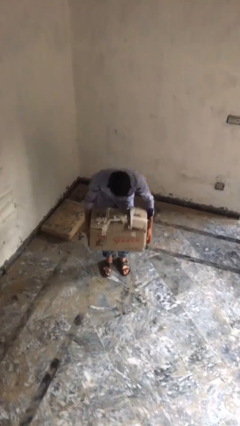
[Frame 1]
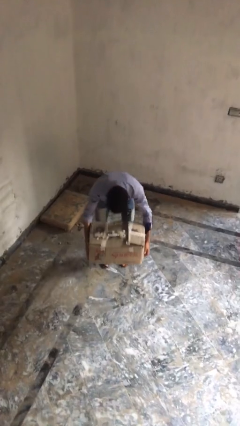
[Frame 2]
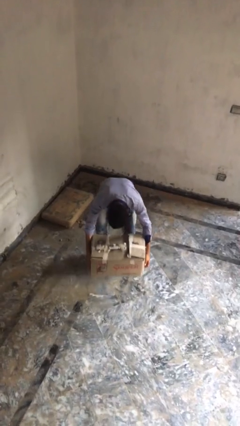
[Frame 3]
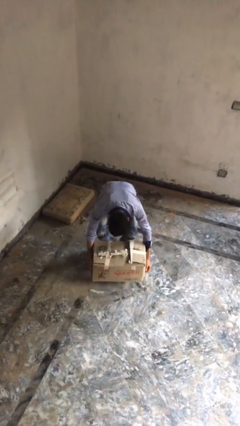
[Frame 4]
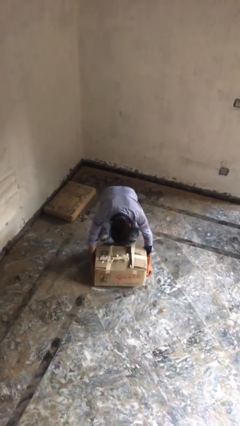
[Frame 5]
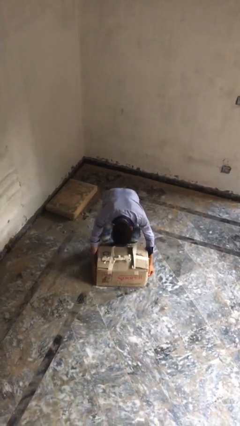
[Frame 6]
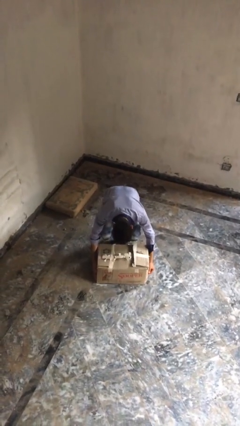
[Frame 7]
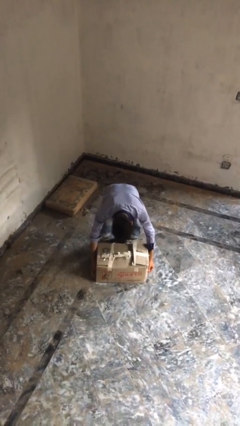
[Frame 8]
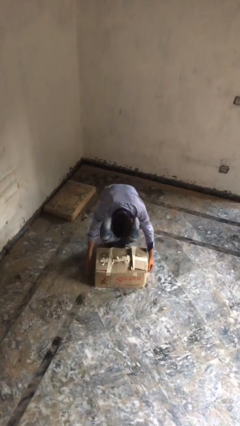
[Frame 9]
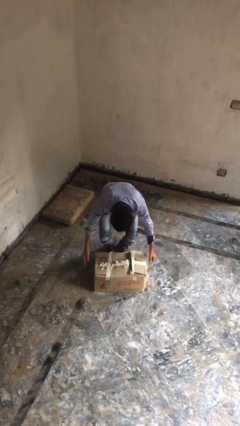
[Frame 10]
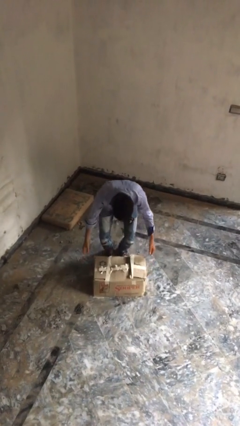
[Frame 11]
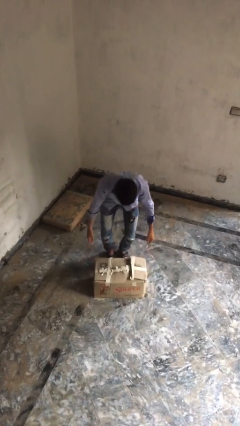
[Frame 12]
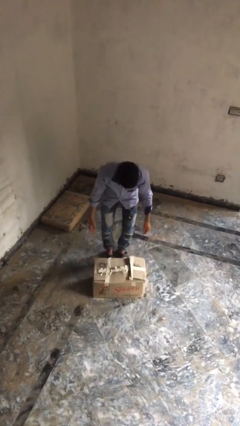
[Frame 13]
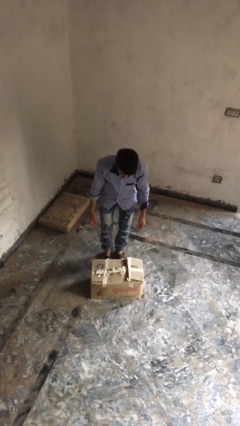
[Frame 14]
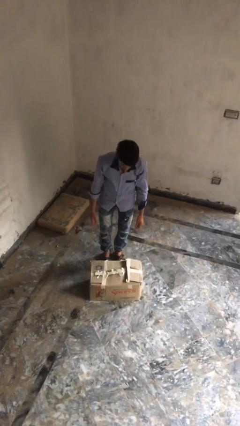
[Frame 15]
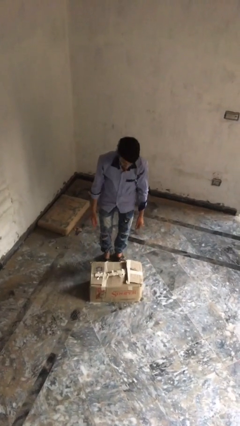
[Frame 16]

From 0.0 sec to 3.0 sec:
person puts down object on floor

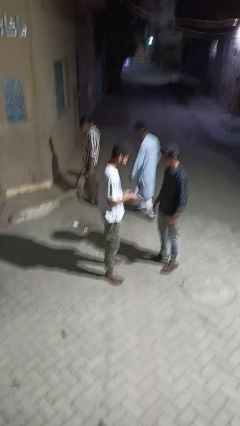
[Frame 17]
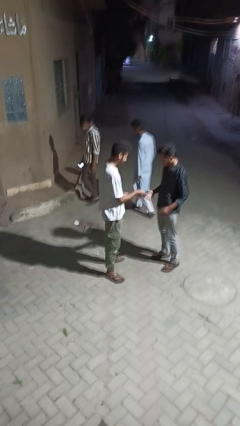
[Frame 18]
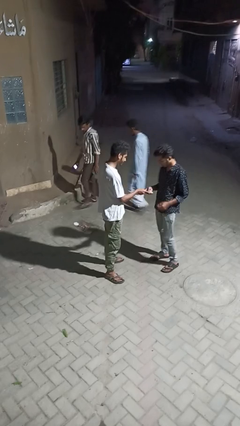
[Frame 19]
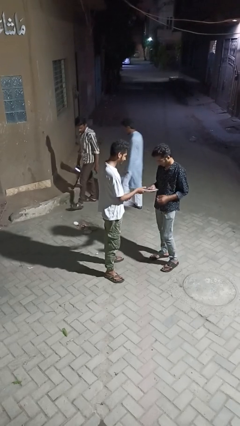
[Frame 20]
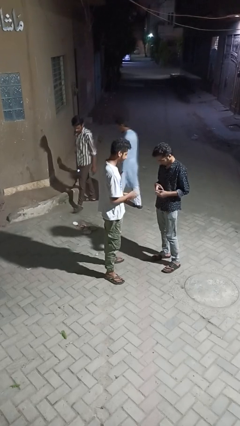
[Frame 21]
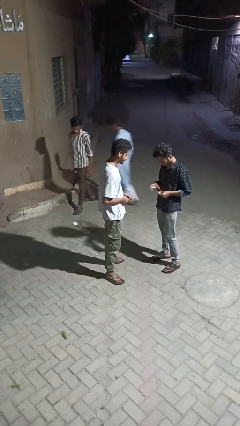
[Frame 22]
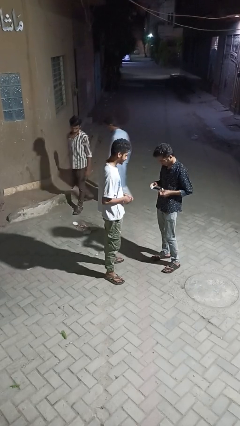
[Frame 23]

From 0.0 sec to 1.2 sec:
person transfers object to person

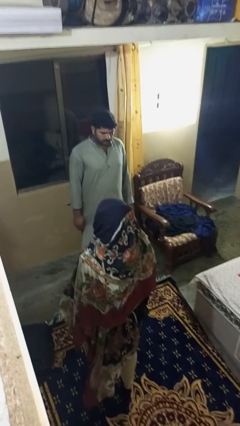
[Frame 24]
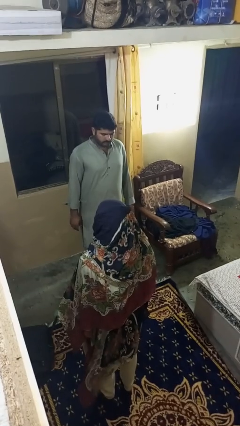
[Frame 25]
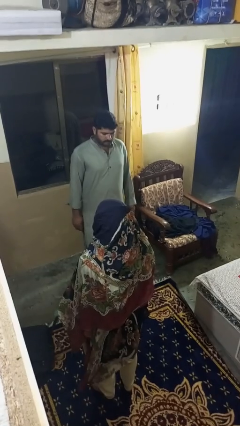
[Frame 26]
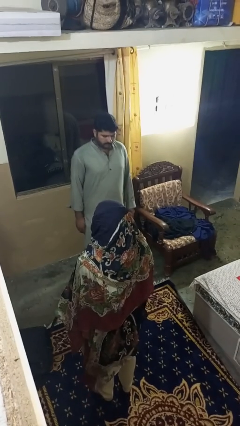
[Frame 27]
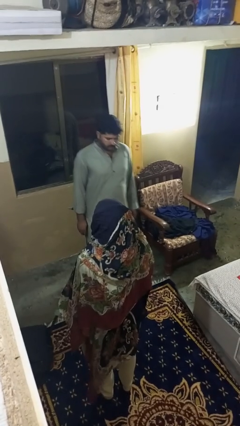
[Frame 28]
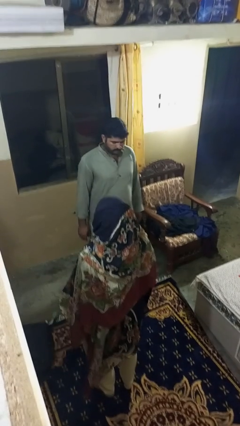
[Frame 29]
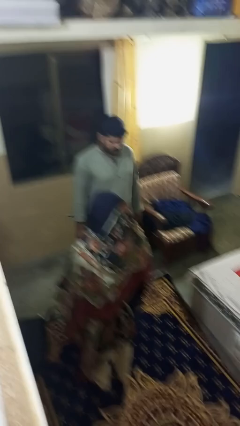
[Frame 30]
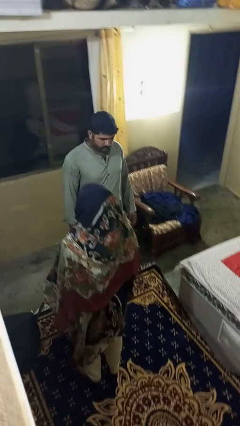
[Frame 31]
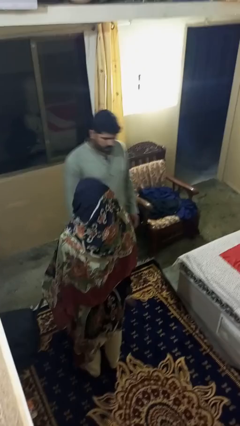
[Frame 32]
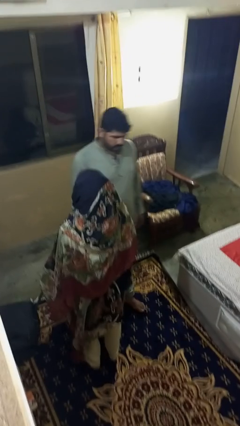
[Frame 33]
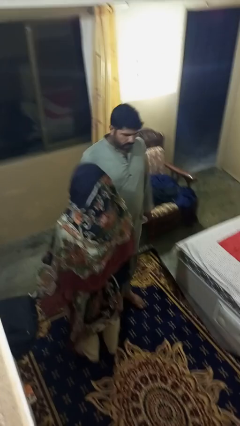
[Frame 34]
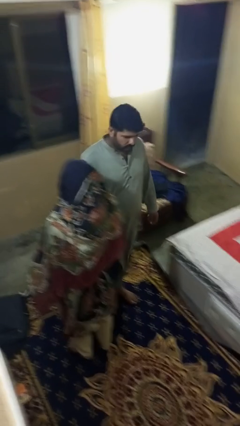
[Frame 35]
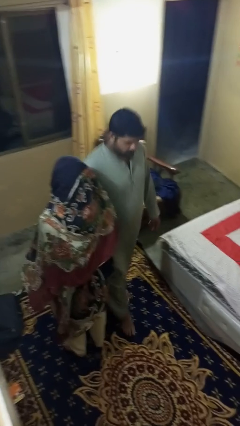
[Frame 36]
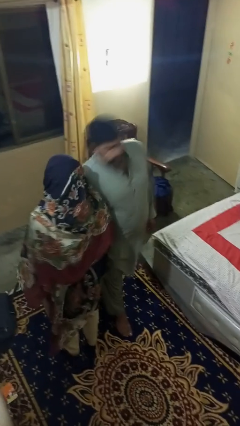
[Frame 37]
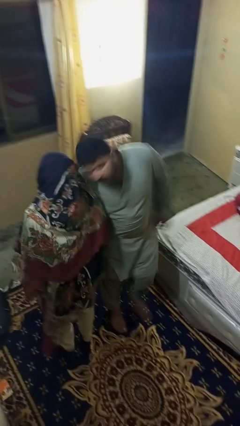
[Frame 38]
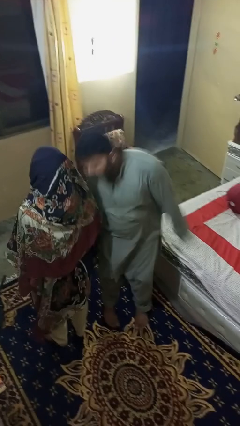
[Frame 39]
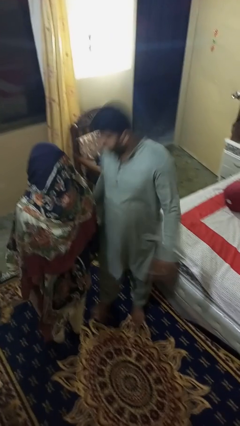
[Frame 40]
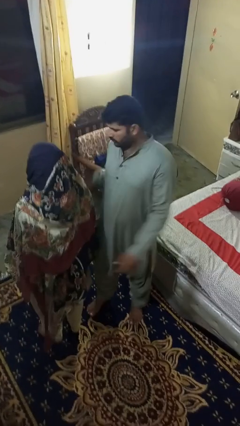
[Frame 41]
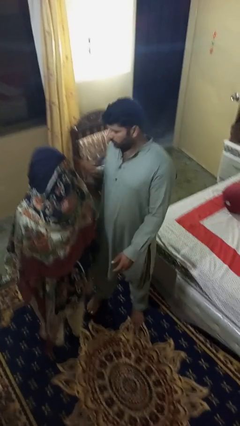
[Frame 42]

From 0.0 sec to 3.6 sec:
person bumps into person

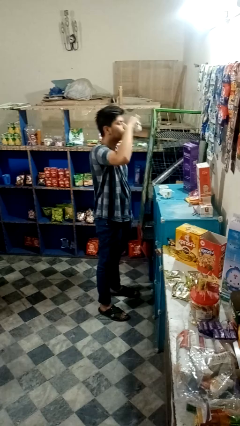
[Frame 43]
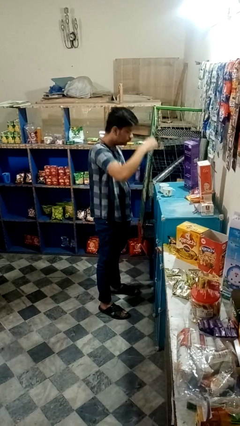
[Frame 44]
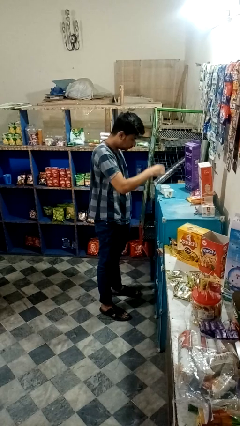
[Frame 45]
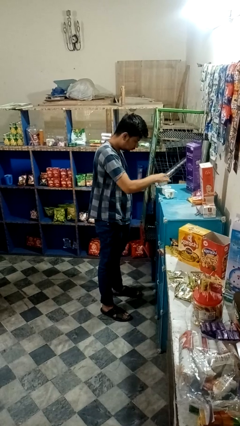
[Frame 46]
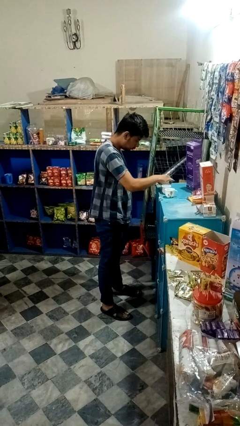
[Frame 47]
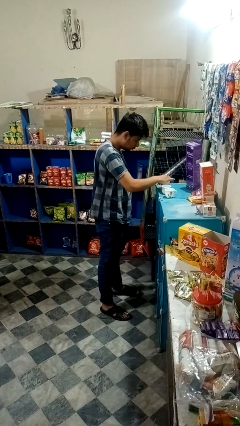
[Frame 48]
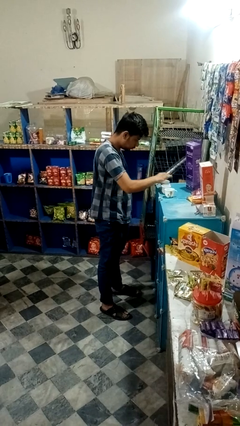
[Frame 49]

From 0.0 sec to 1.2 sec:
person puts down object on table

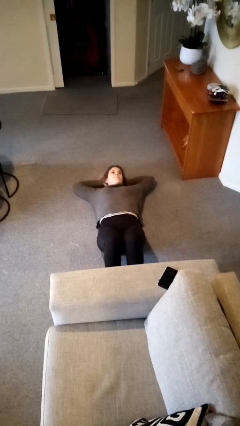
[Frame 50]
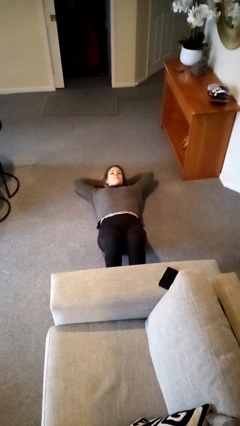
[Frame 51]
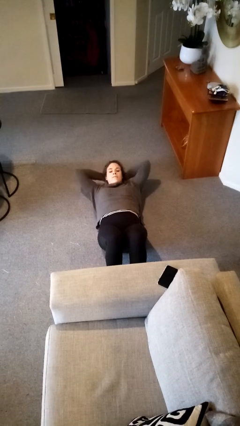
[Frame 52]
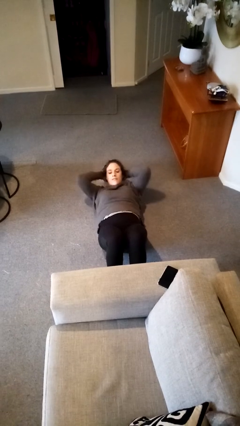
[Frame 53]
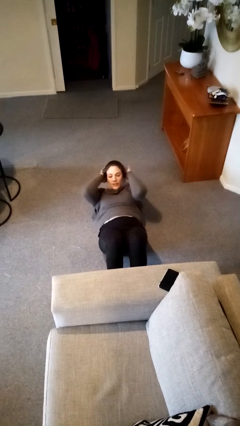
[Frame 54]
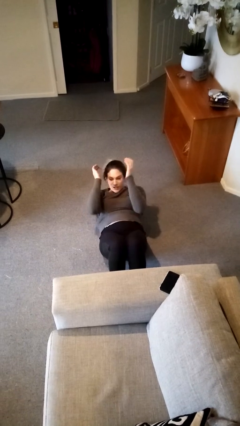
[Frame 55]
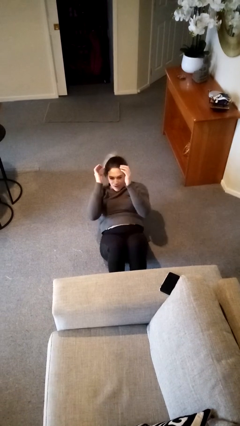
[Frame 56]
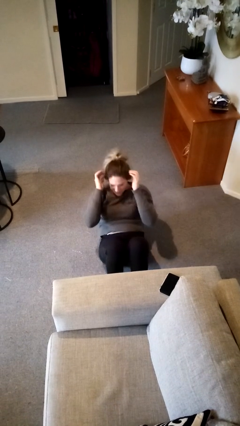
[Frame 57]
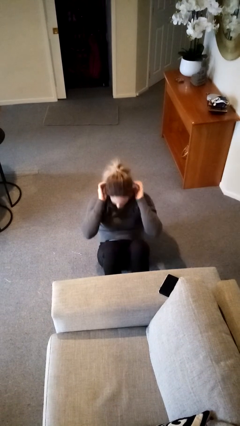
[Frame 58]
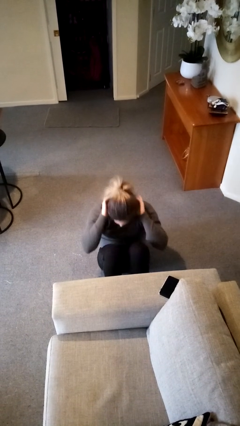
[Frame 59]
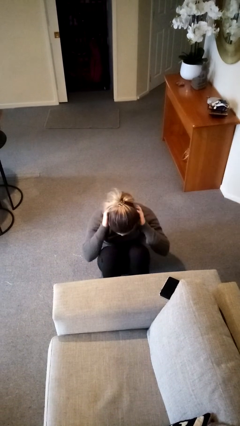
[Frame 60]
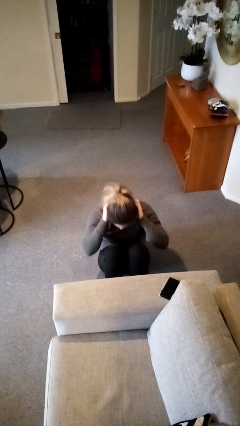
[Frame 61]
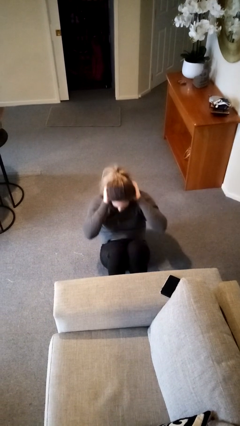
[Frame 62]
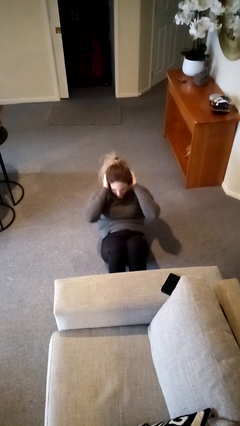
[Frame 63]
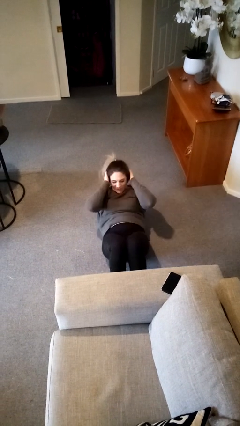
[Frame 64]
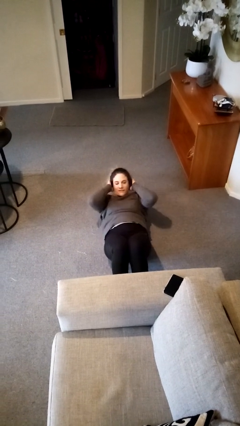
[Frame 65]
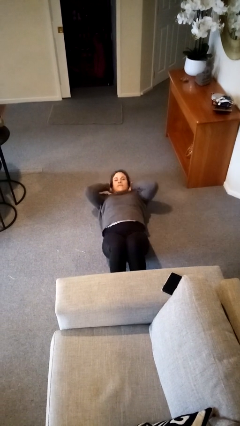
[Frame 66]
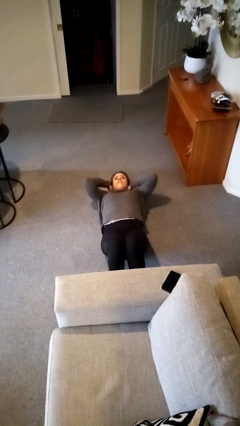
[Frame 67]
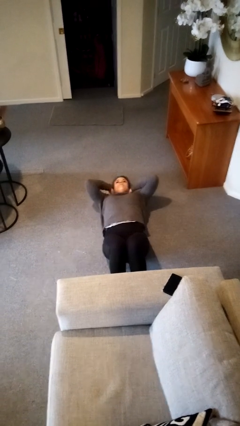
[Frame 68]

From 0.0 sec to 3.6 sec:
person exercises with situp

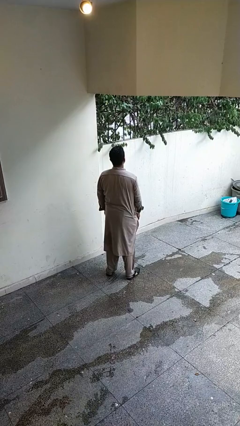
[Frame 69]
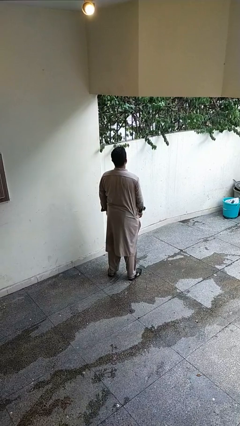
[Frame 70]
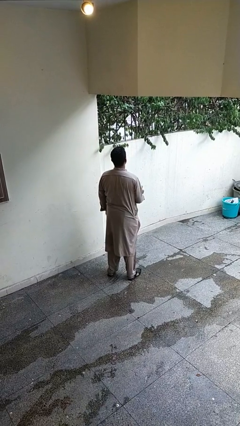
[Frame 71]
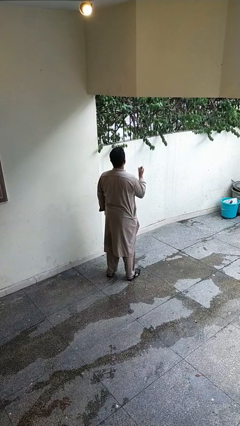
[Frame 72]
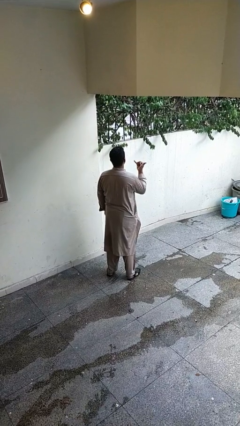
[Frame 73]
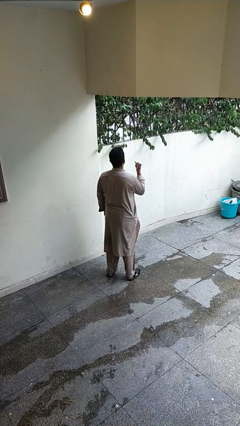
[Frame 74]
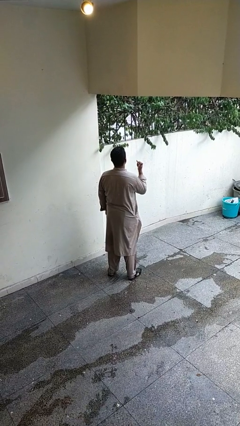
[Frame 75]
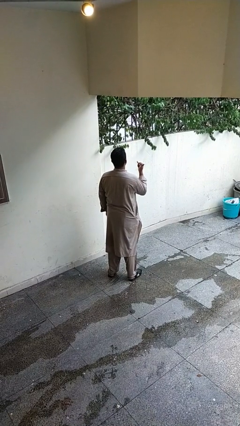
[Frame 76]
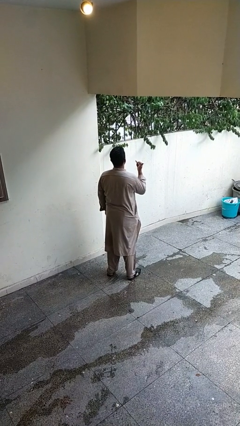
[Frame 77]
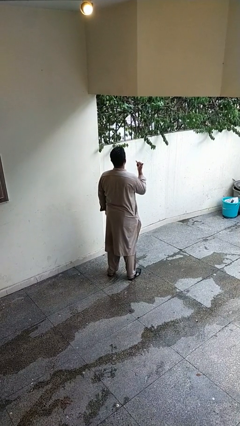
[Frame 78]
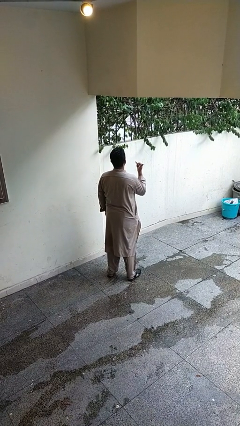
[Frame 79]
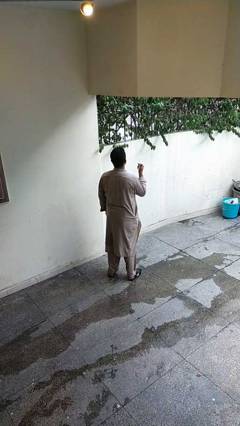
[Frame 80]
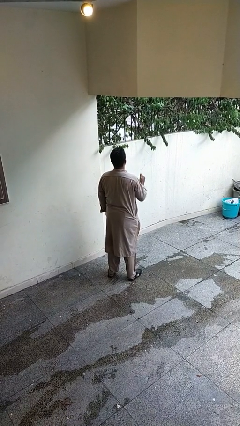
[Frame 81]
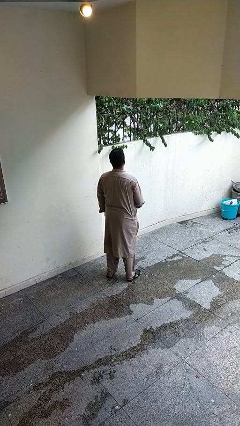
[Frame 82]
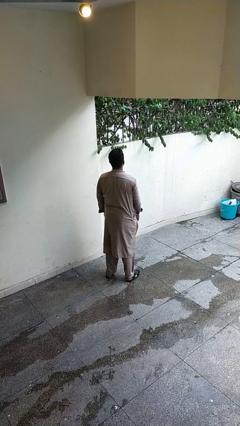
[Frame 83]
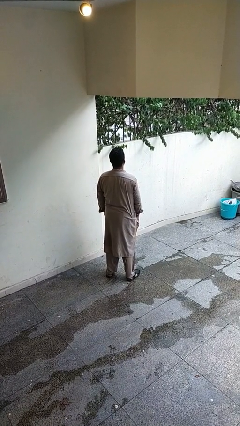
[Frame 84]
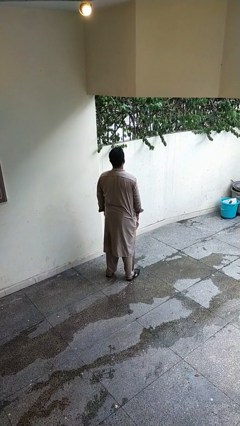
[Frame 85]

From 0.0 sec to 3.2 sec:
person gestures hang loose

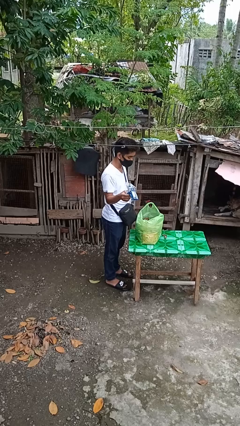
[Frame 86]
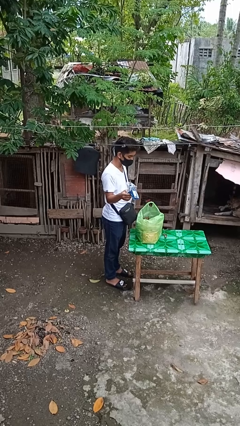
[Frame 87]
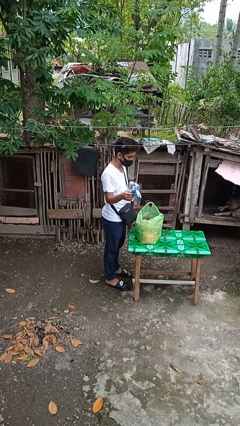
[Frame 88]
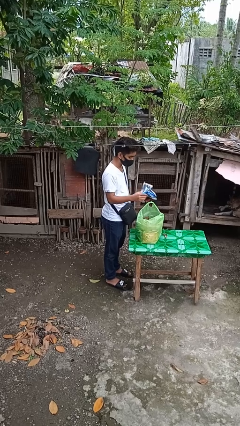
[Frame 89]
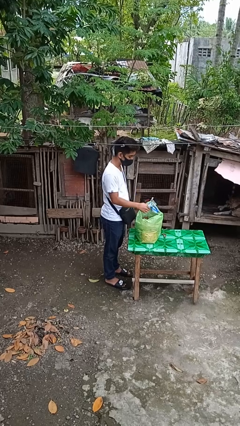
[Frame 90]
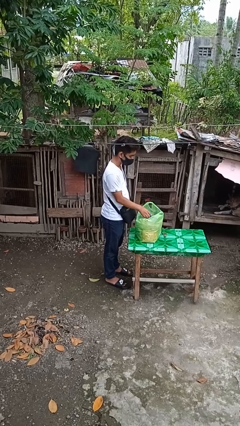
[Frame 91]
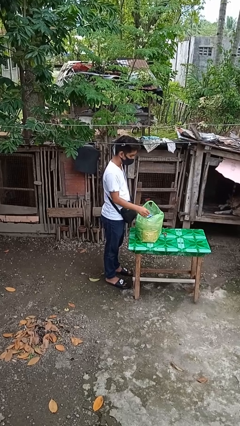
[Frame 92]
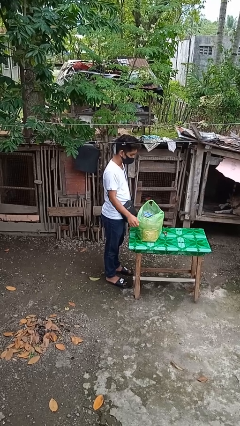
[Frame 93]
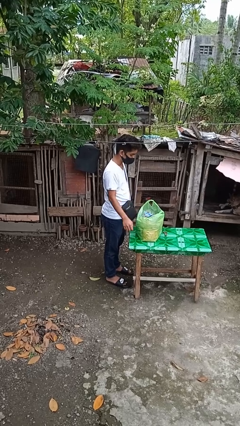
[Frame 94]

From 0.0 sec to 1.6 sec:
person puts object into bag
